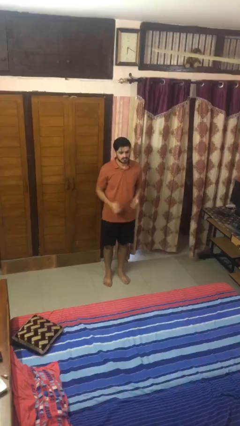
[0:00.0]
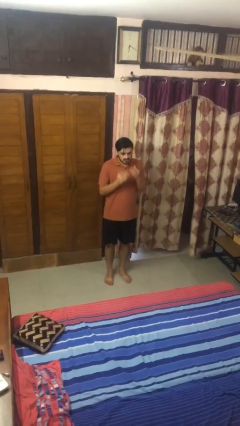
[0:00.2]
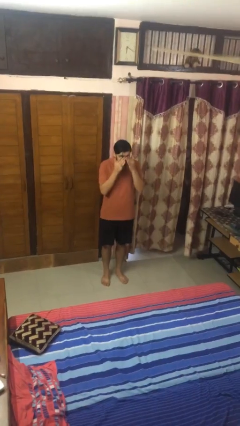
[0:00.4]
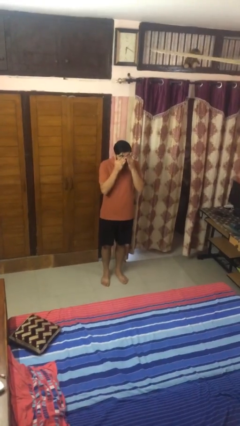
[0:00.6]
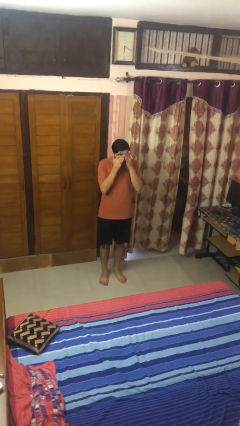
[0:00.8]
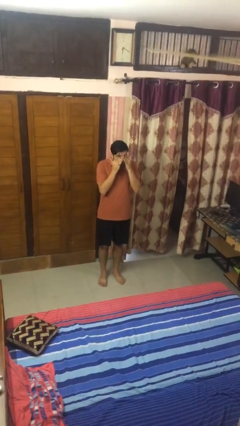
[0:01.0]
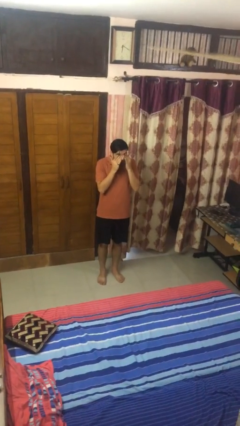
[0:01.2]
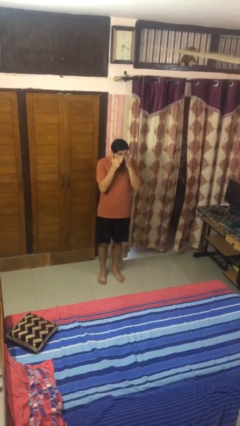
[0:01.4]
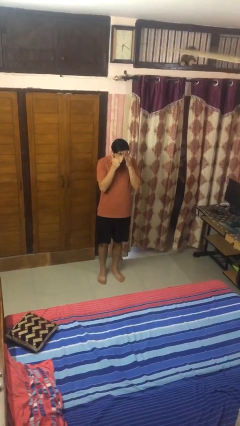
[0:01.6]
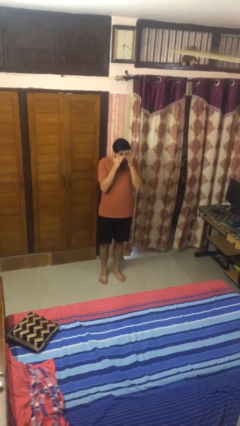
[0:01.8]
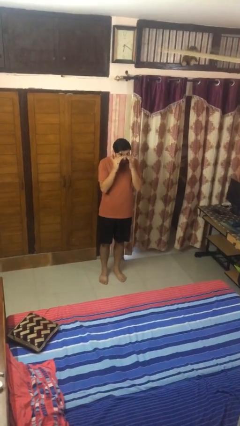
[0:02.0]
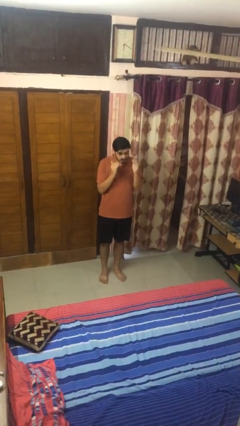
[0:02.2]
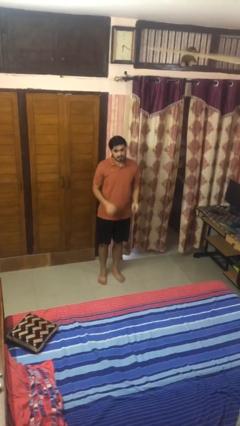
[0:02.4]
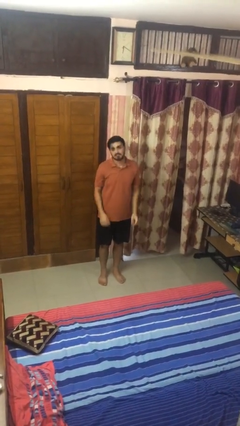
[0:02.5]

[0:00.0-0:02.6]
person rubs eyes

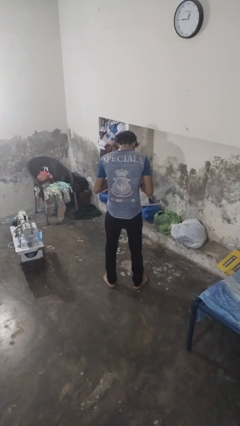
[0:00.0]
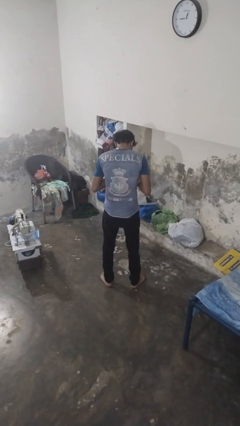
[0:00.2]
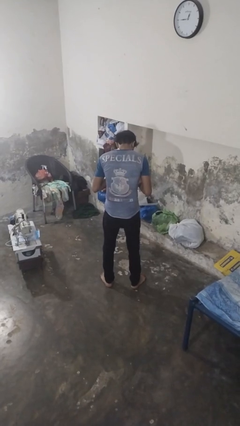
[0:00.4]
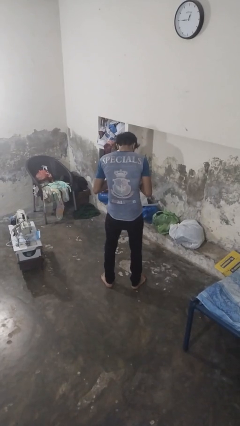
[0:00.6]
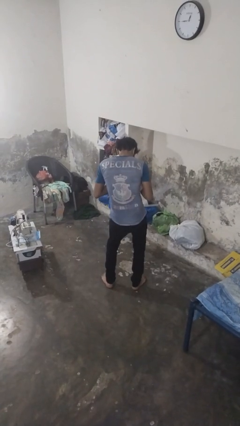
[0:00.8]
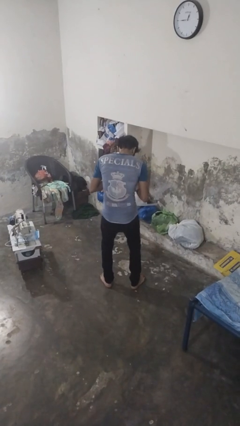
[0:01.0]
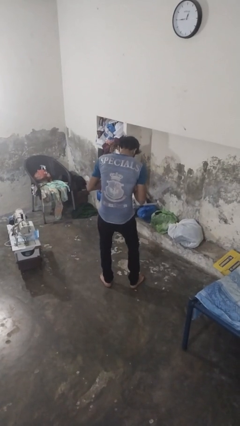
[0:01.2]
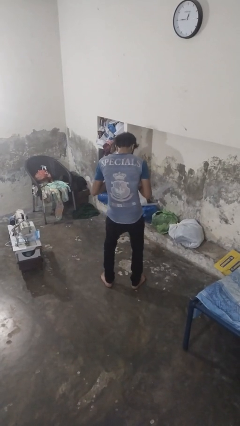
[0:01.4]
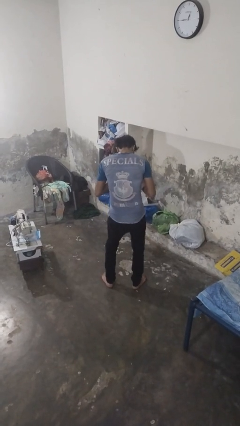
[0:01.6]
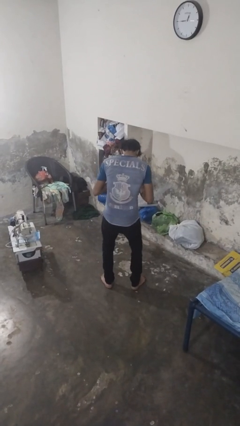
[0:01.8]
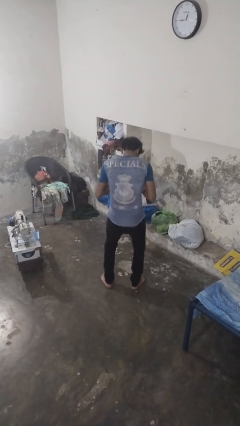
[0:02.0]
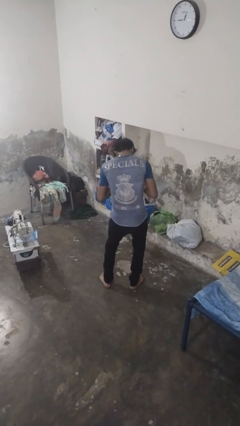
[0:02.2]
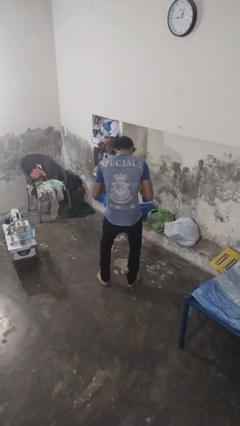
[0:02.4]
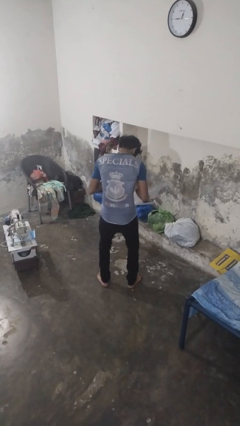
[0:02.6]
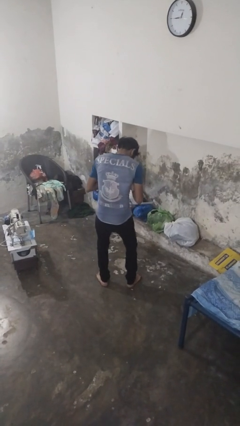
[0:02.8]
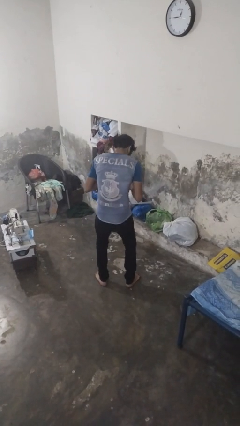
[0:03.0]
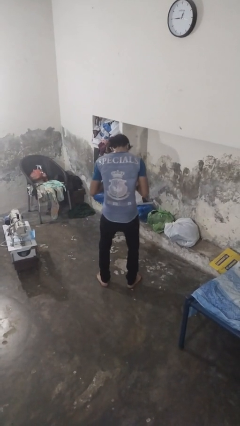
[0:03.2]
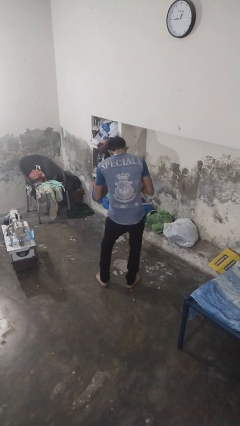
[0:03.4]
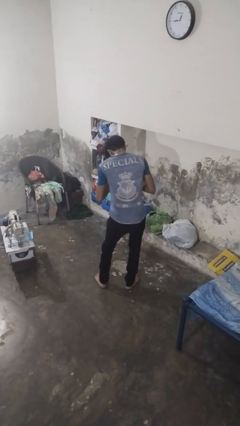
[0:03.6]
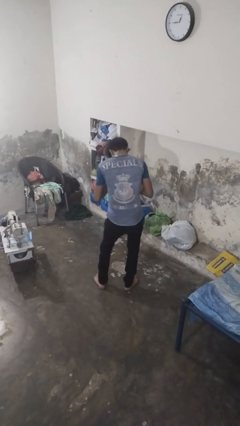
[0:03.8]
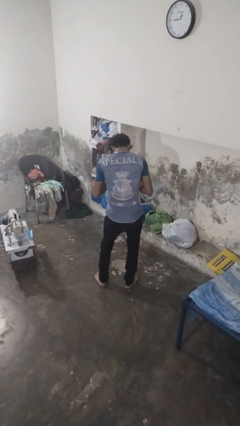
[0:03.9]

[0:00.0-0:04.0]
person wiggles hips

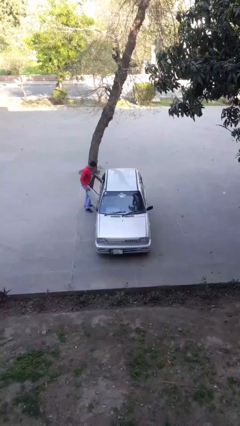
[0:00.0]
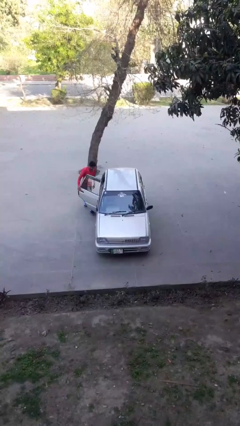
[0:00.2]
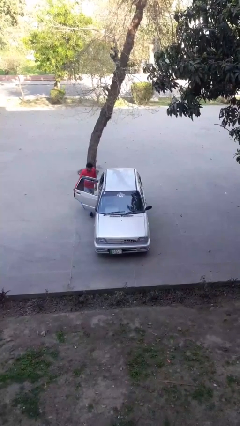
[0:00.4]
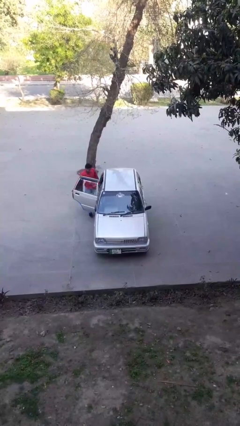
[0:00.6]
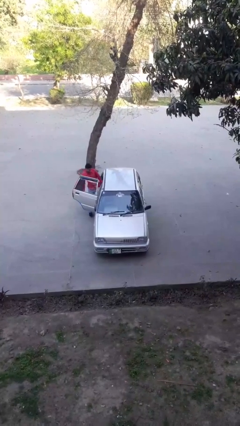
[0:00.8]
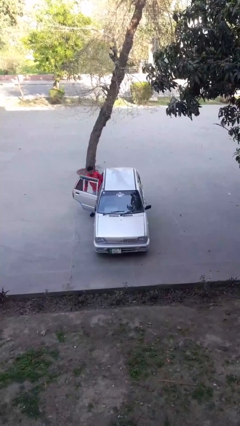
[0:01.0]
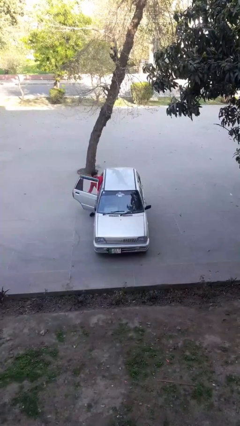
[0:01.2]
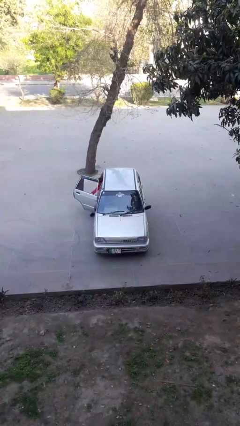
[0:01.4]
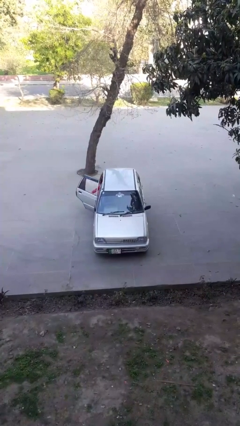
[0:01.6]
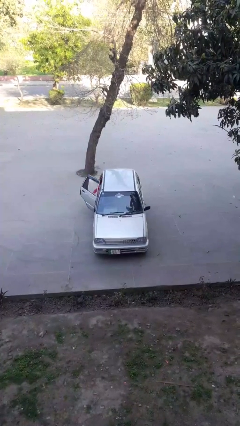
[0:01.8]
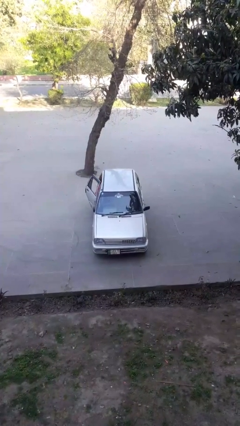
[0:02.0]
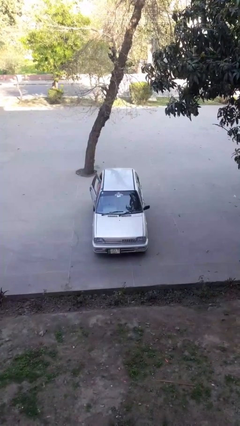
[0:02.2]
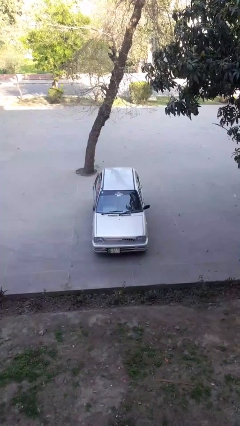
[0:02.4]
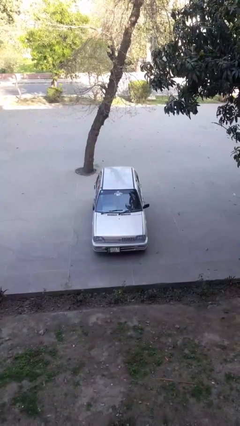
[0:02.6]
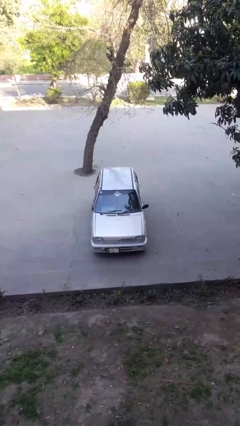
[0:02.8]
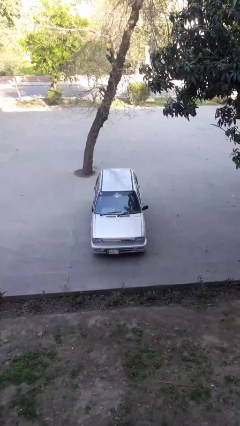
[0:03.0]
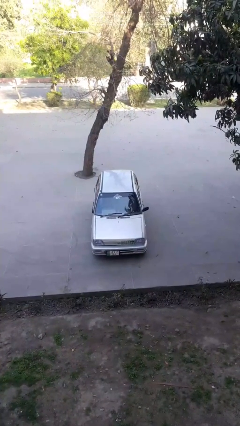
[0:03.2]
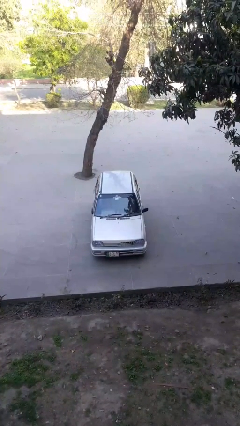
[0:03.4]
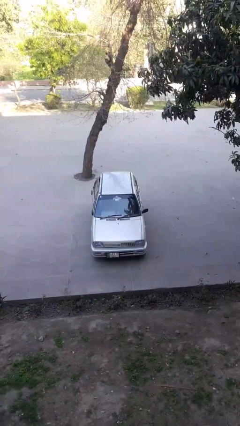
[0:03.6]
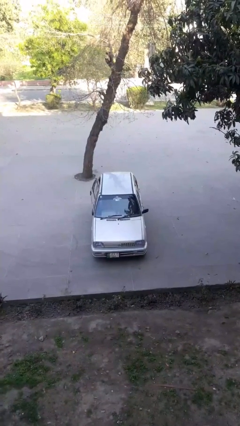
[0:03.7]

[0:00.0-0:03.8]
car picks up person

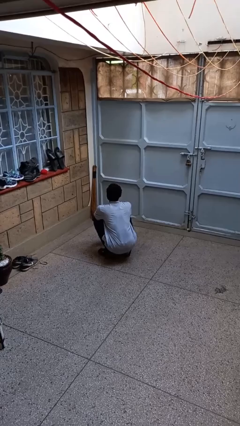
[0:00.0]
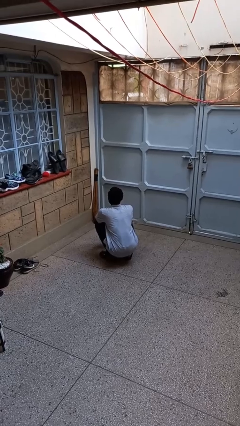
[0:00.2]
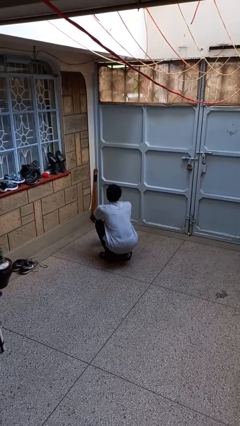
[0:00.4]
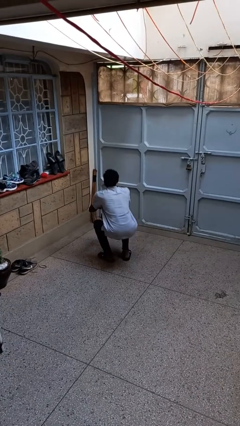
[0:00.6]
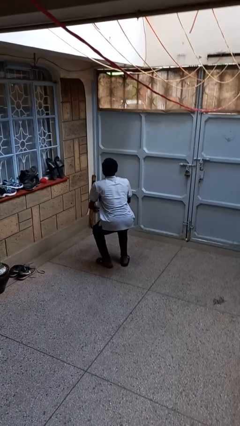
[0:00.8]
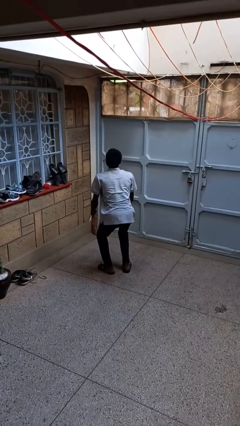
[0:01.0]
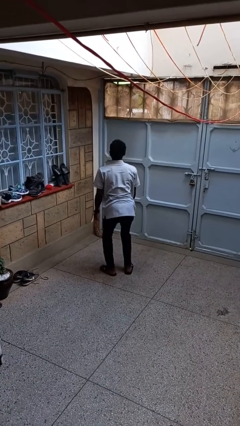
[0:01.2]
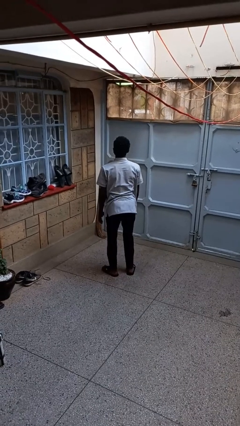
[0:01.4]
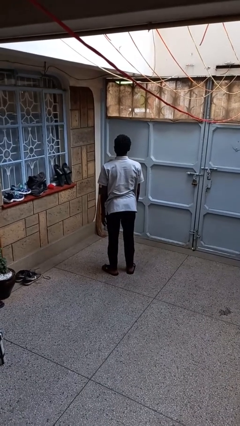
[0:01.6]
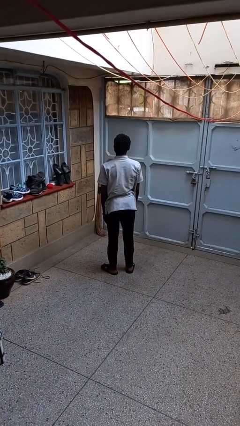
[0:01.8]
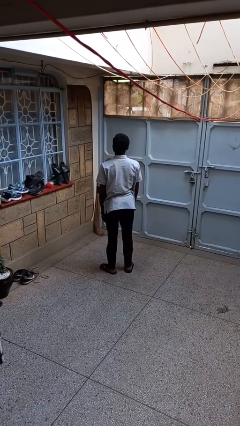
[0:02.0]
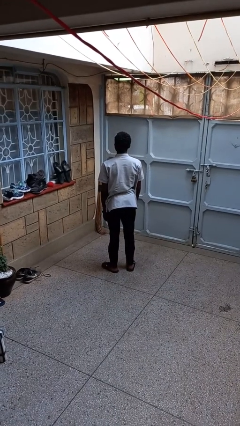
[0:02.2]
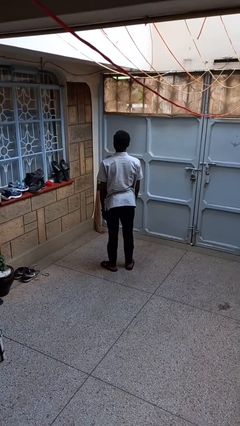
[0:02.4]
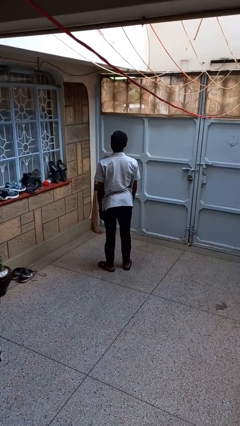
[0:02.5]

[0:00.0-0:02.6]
person stands up

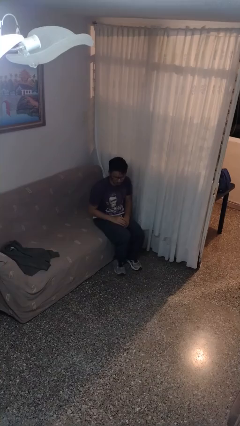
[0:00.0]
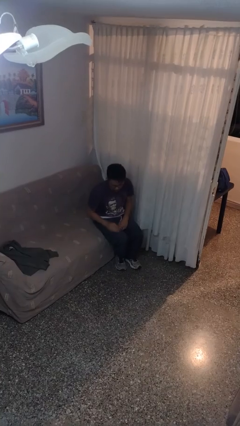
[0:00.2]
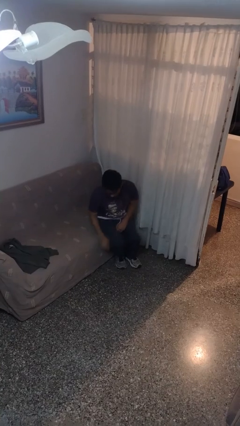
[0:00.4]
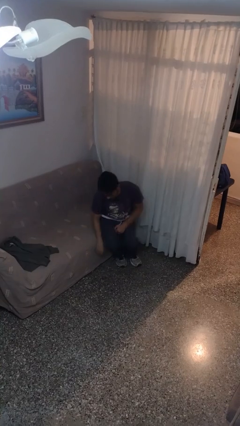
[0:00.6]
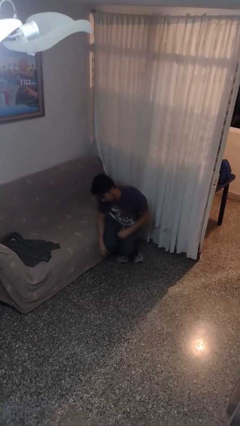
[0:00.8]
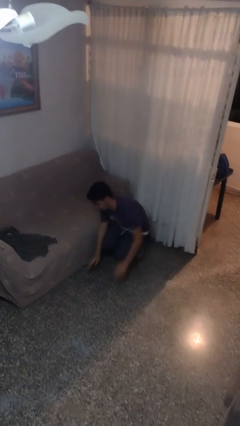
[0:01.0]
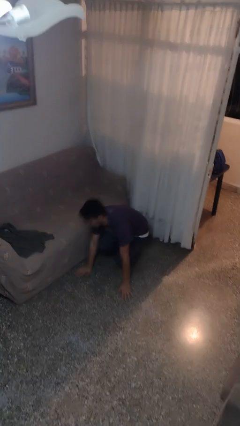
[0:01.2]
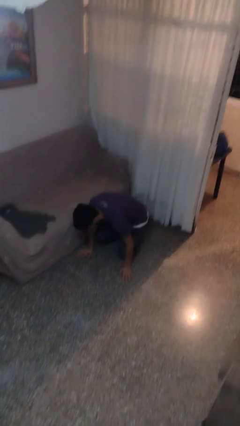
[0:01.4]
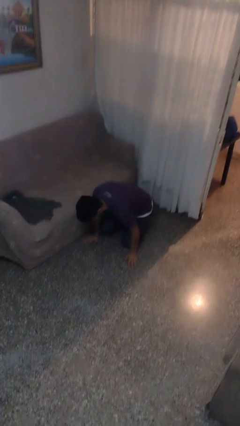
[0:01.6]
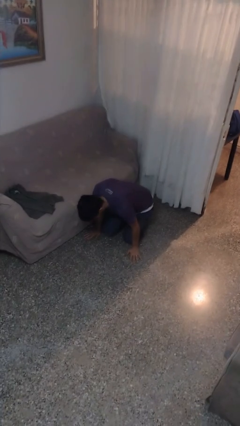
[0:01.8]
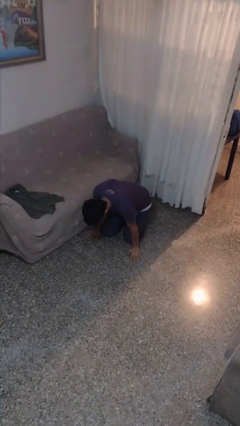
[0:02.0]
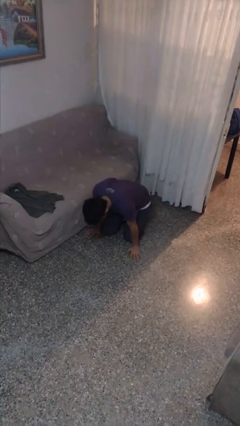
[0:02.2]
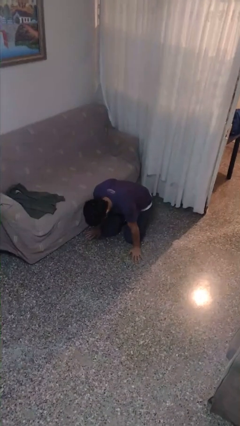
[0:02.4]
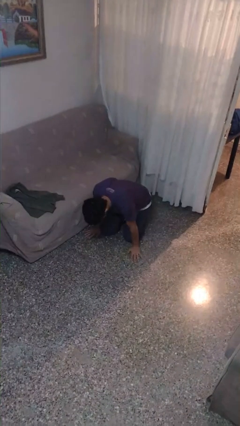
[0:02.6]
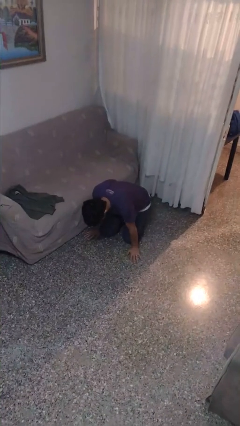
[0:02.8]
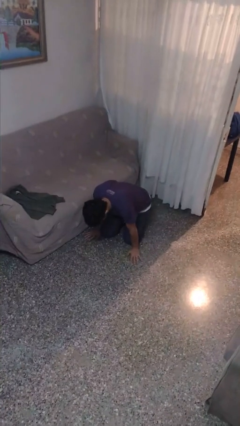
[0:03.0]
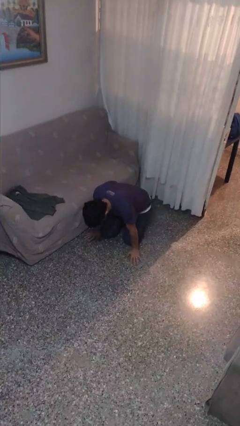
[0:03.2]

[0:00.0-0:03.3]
person falls from chair

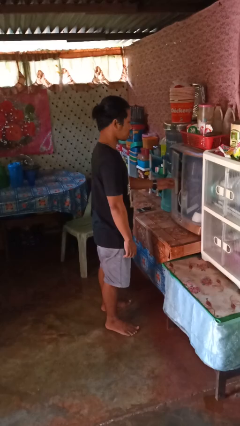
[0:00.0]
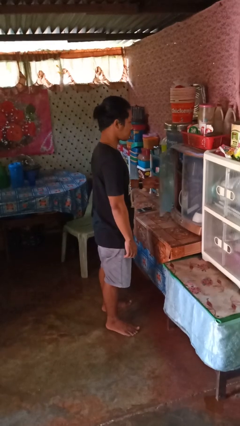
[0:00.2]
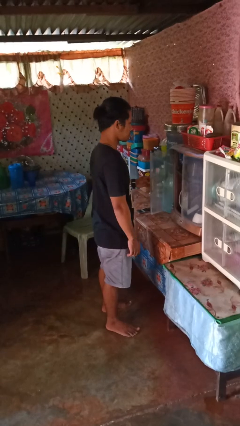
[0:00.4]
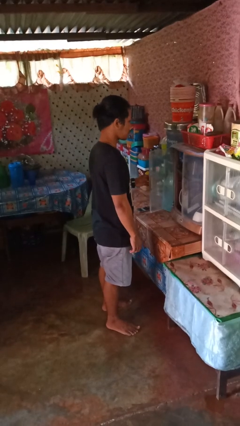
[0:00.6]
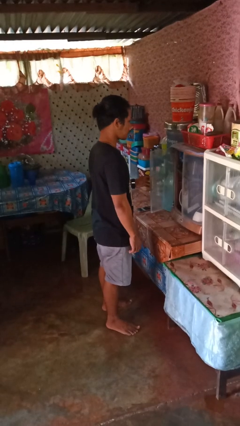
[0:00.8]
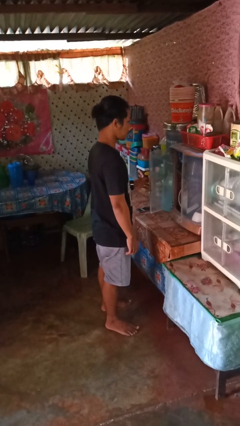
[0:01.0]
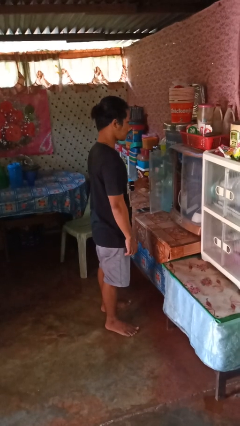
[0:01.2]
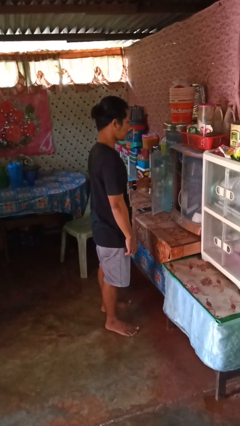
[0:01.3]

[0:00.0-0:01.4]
person opens cabinet
